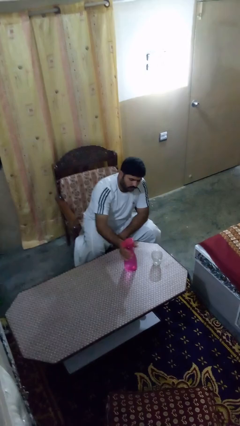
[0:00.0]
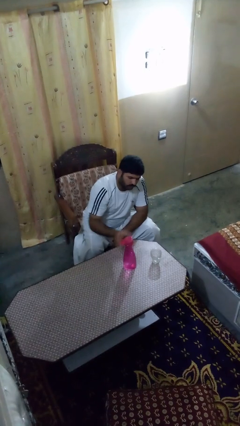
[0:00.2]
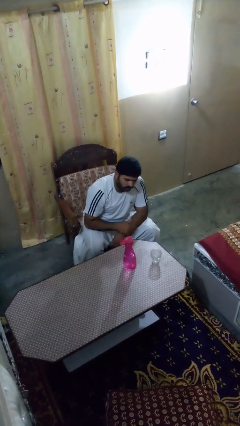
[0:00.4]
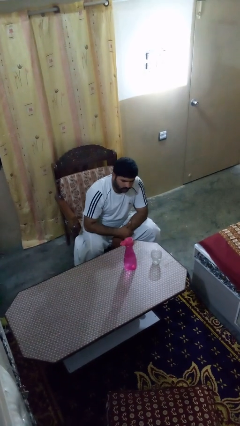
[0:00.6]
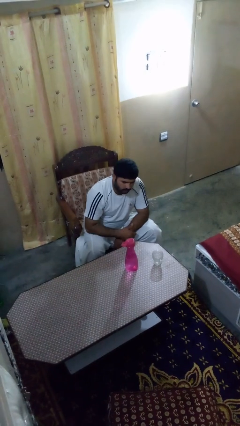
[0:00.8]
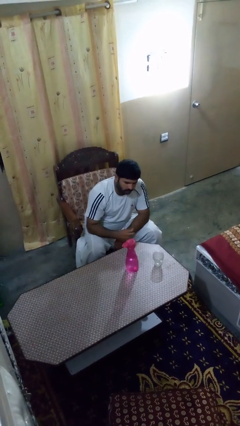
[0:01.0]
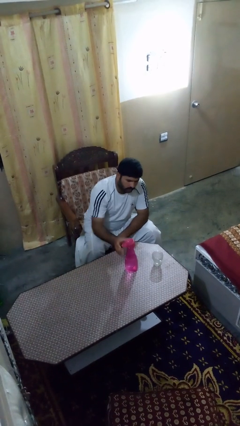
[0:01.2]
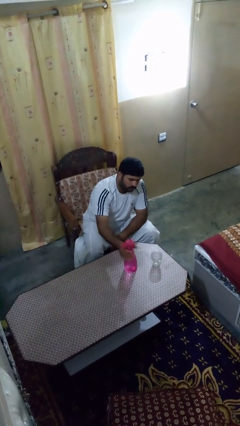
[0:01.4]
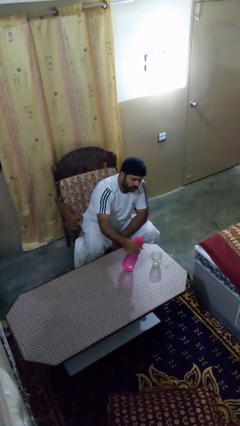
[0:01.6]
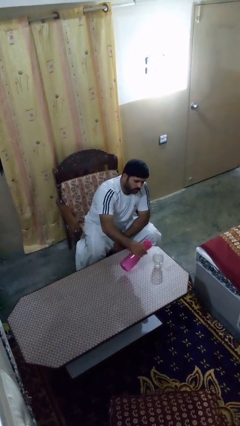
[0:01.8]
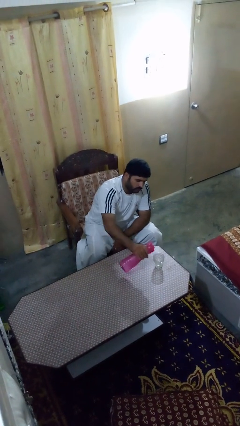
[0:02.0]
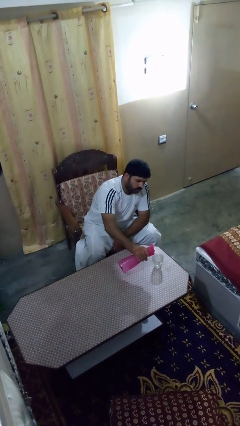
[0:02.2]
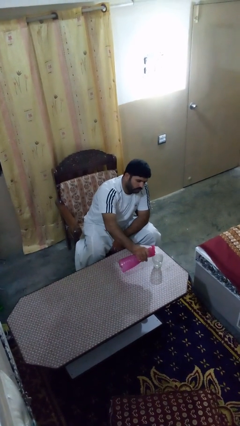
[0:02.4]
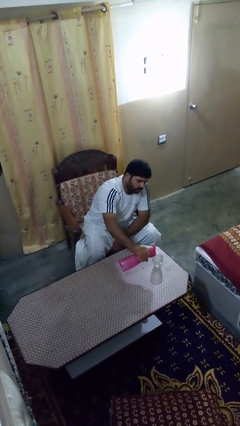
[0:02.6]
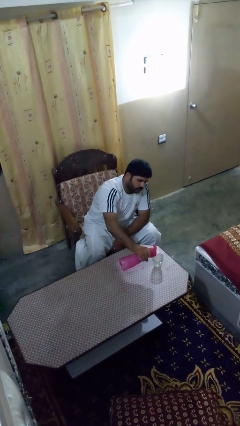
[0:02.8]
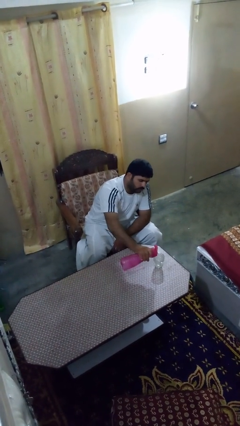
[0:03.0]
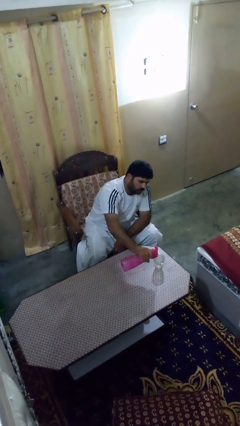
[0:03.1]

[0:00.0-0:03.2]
person pours liquid into cup

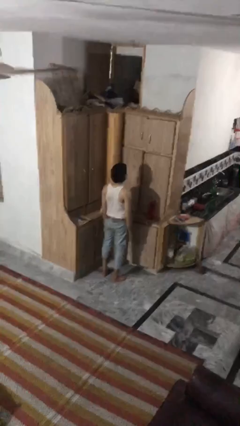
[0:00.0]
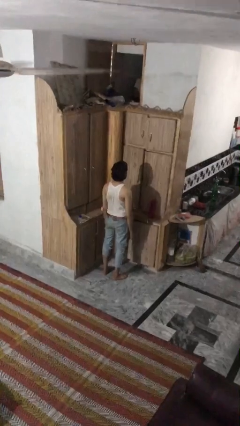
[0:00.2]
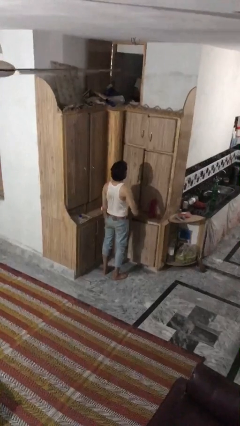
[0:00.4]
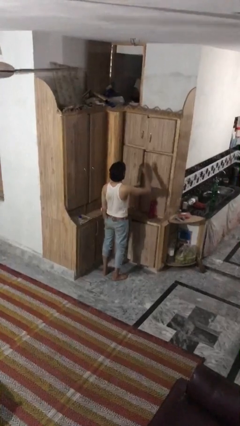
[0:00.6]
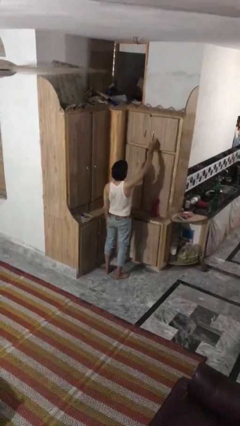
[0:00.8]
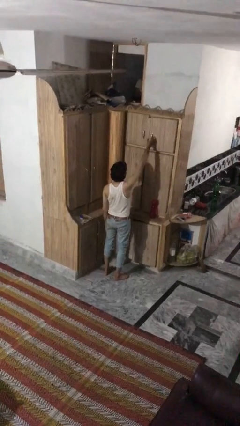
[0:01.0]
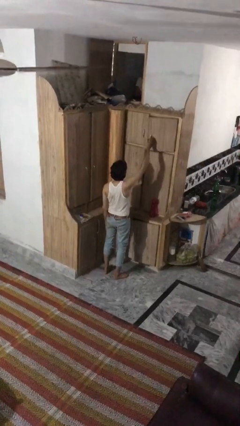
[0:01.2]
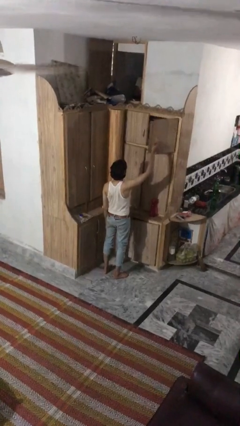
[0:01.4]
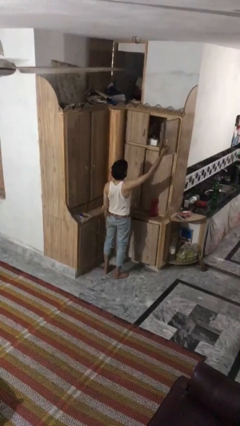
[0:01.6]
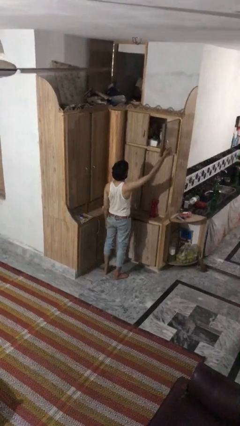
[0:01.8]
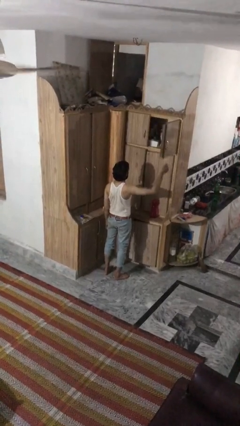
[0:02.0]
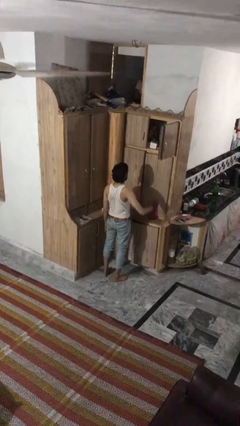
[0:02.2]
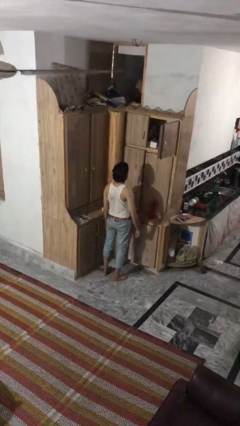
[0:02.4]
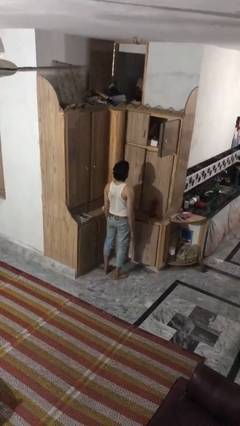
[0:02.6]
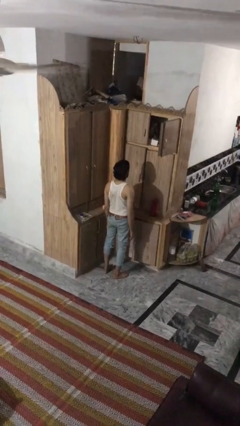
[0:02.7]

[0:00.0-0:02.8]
person opens cabinet

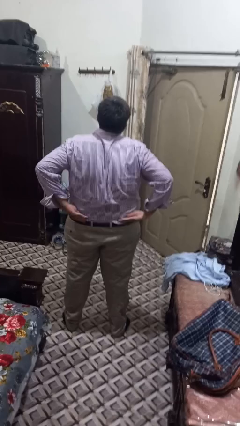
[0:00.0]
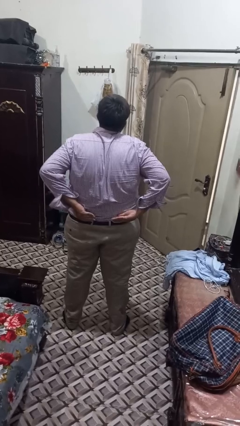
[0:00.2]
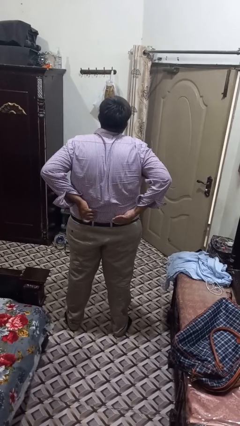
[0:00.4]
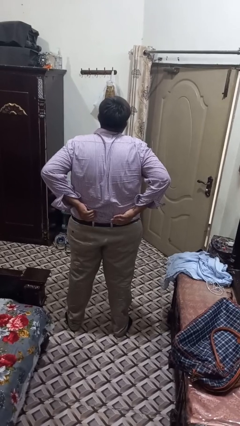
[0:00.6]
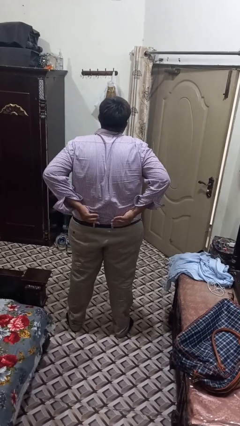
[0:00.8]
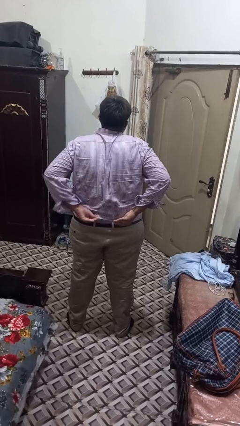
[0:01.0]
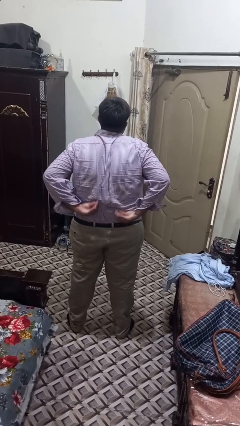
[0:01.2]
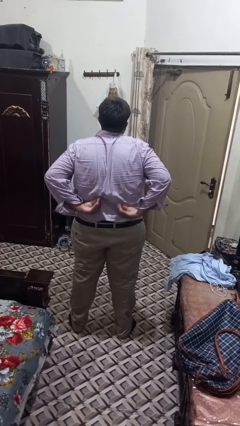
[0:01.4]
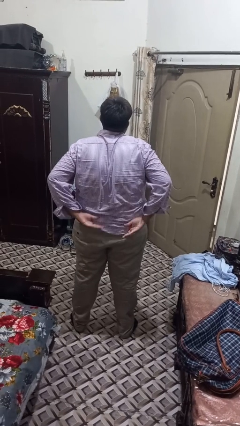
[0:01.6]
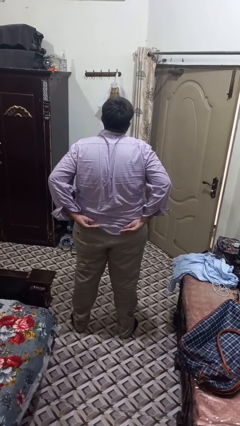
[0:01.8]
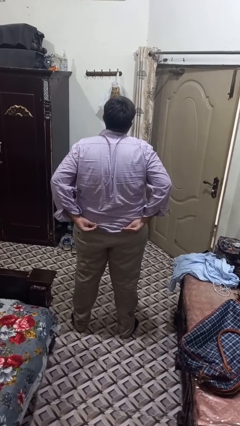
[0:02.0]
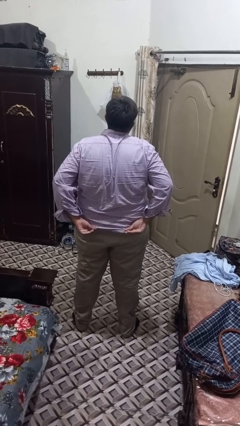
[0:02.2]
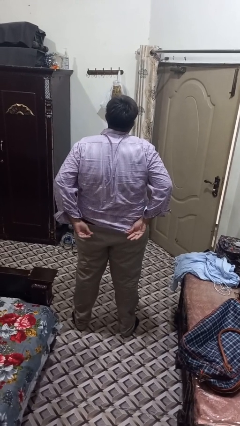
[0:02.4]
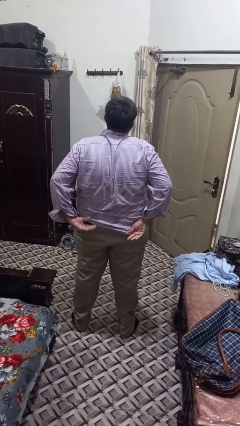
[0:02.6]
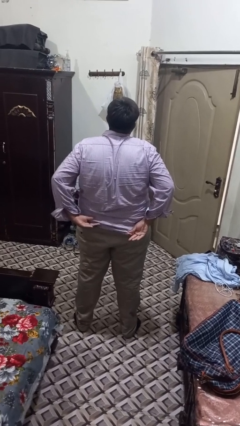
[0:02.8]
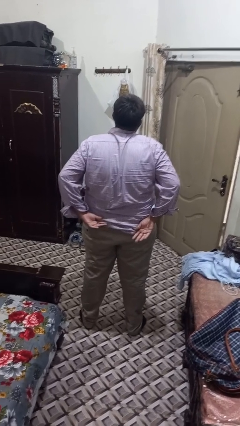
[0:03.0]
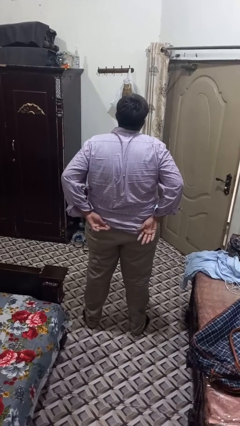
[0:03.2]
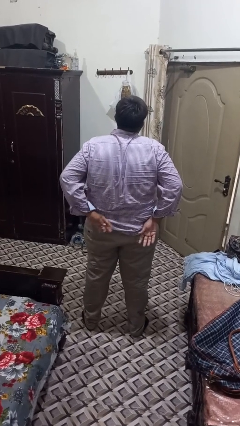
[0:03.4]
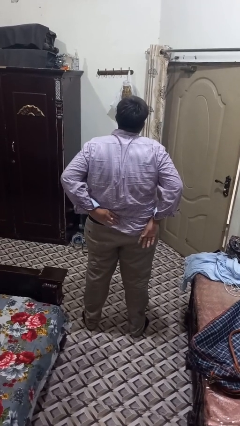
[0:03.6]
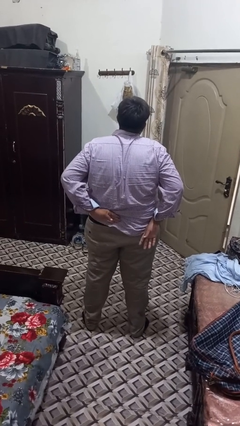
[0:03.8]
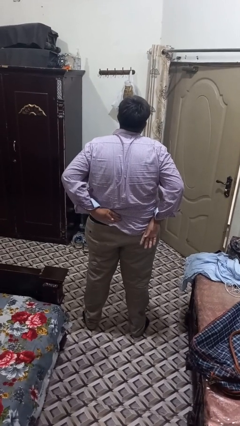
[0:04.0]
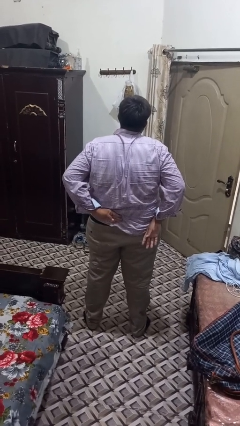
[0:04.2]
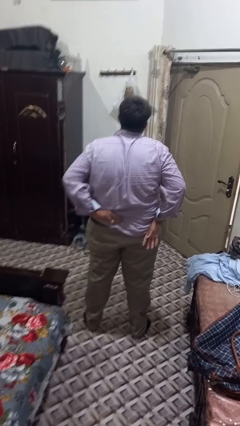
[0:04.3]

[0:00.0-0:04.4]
person untucks shirt

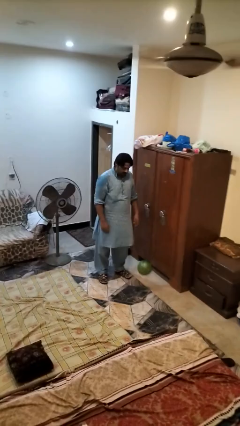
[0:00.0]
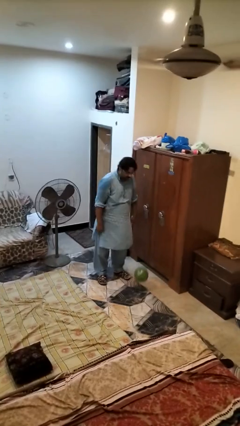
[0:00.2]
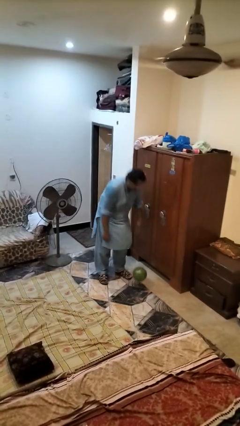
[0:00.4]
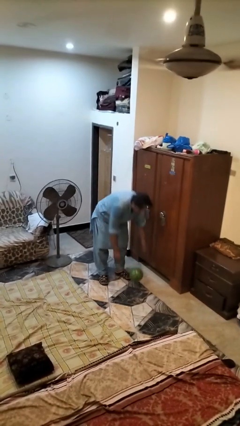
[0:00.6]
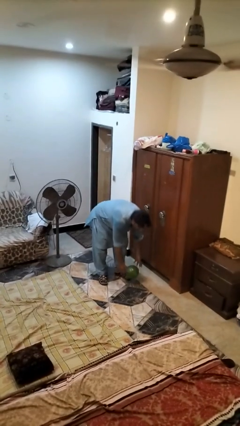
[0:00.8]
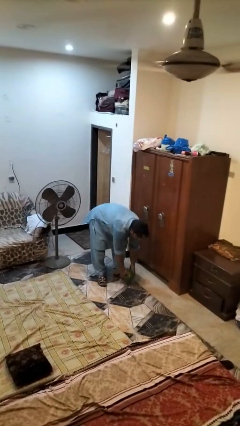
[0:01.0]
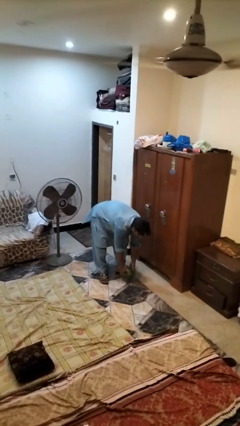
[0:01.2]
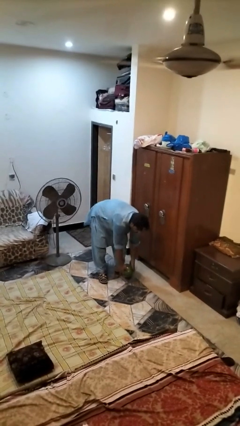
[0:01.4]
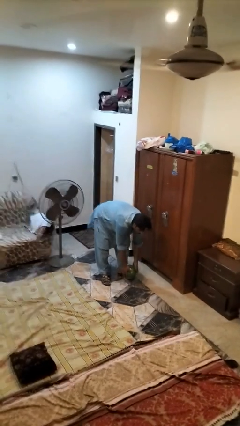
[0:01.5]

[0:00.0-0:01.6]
person catches dropped object

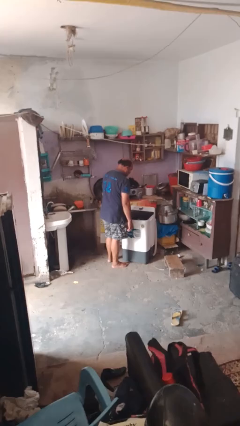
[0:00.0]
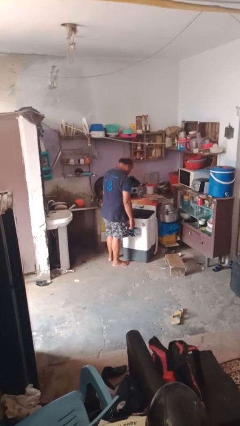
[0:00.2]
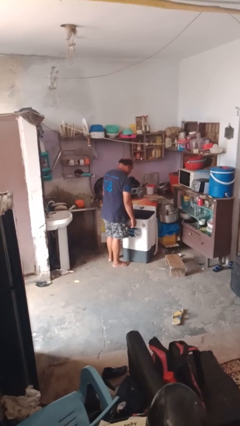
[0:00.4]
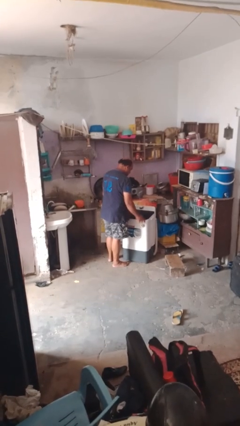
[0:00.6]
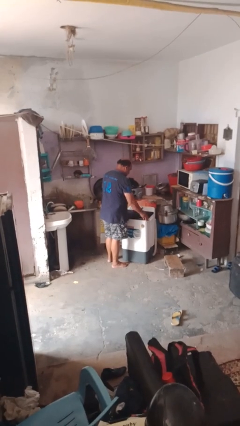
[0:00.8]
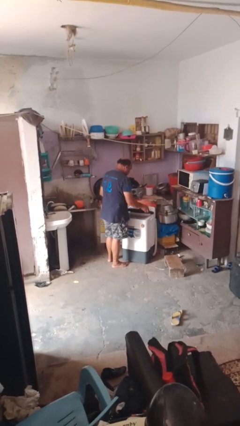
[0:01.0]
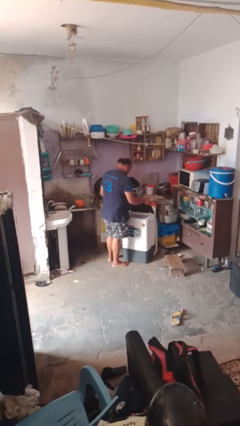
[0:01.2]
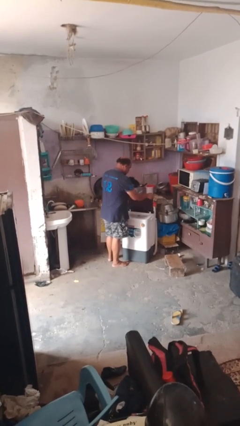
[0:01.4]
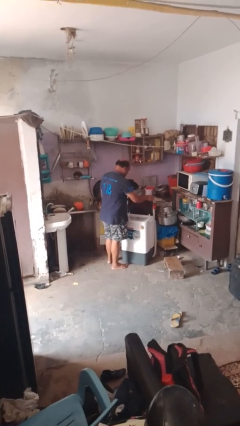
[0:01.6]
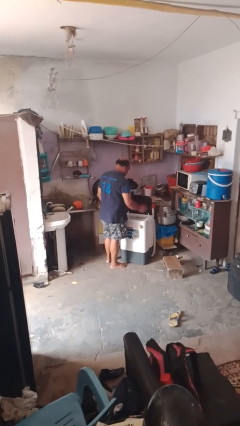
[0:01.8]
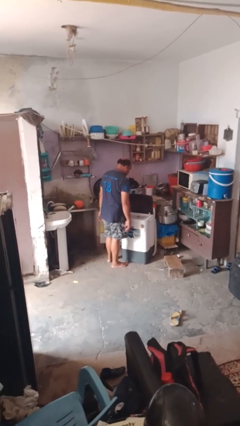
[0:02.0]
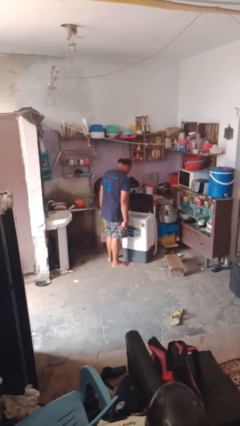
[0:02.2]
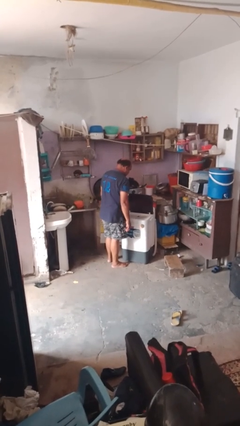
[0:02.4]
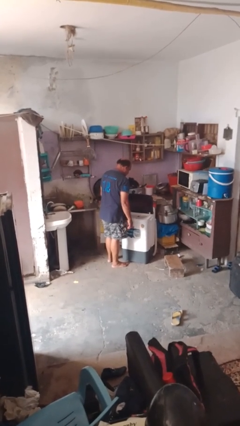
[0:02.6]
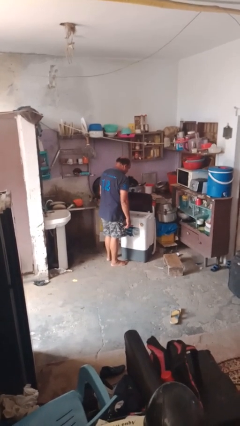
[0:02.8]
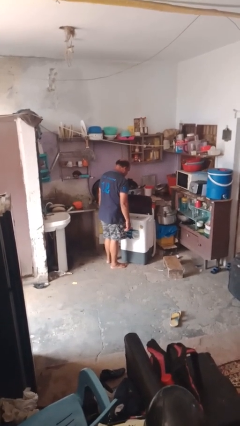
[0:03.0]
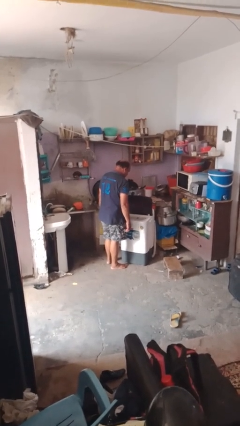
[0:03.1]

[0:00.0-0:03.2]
person opens clothes washer

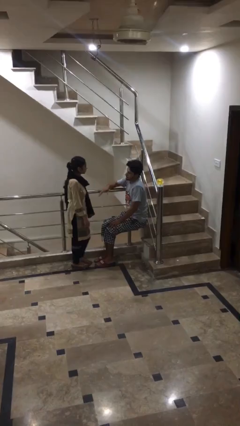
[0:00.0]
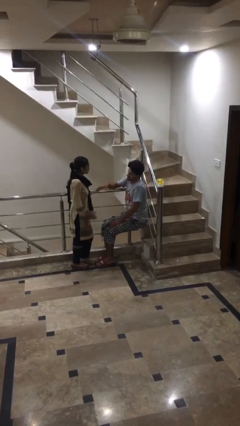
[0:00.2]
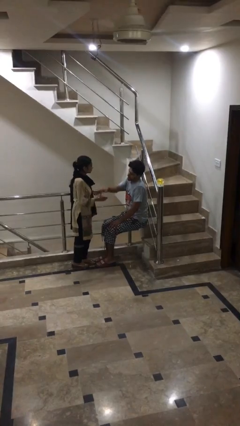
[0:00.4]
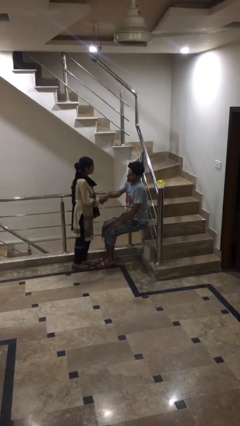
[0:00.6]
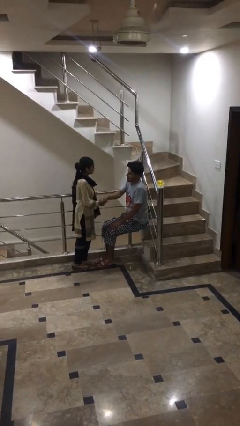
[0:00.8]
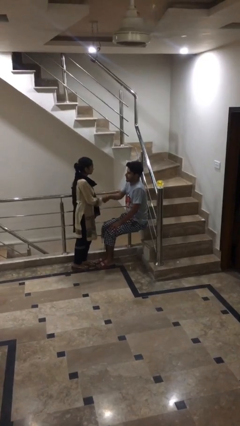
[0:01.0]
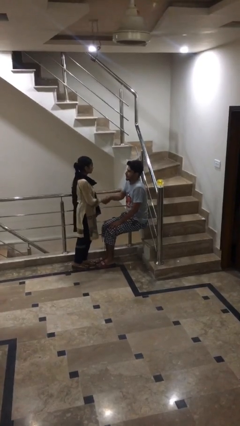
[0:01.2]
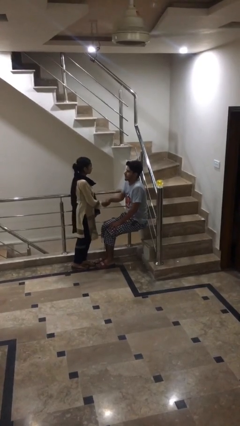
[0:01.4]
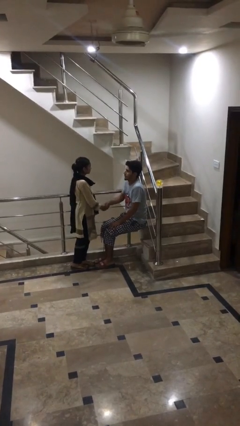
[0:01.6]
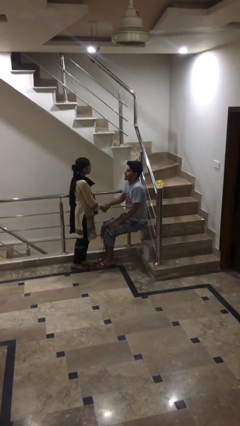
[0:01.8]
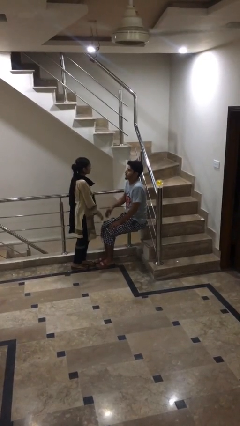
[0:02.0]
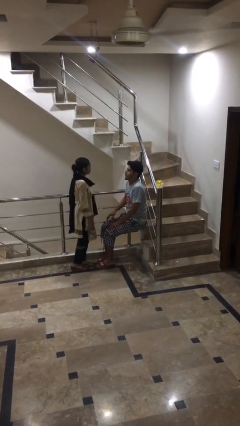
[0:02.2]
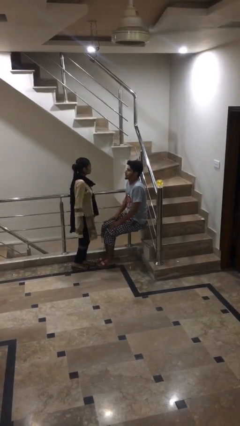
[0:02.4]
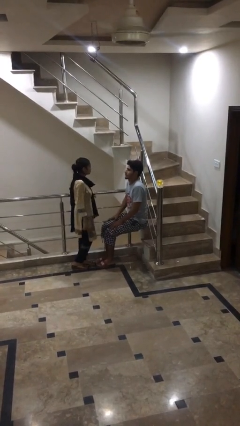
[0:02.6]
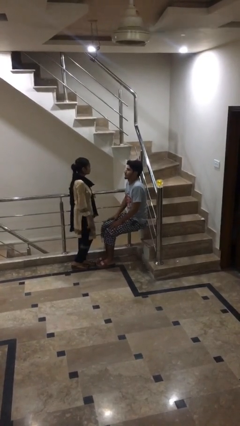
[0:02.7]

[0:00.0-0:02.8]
person shakes hand
